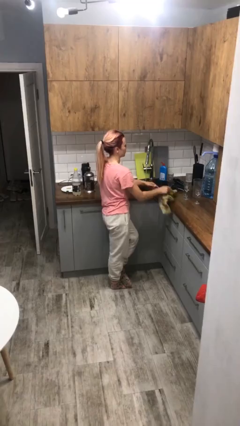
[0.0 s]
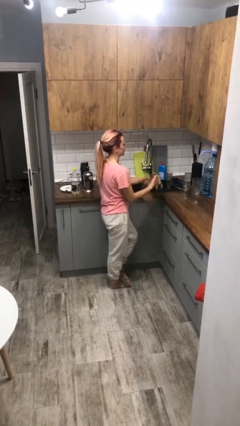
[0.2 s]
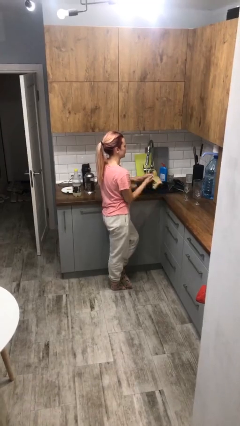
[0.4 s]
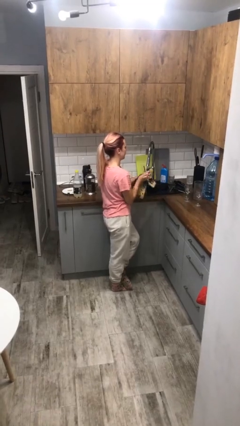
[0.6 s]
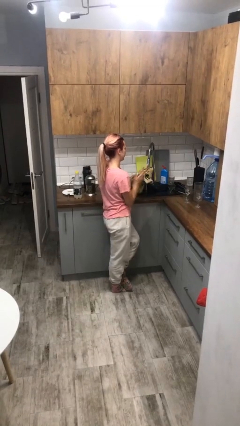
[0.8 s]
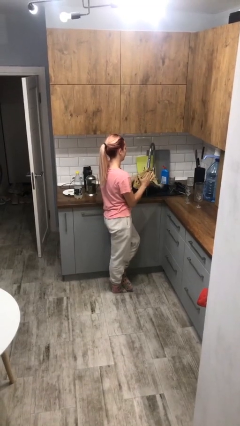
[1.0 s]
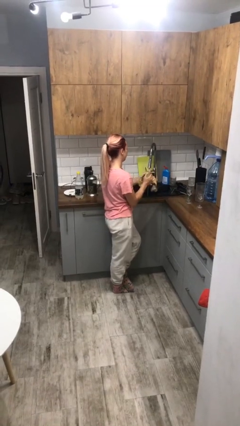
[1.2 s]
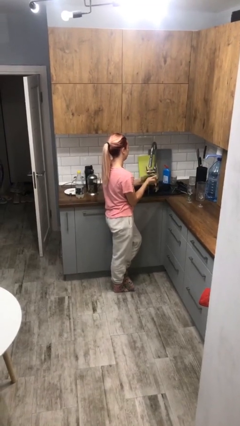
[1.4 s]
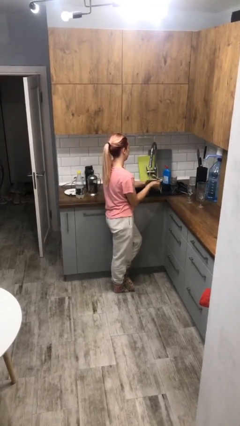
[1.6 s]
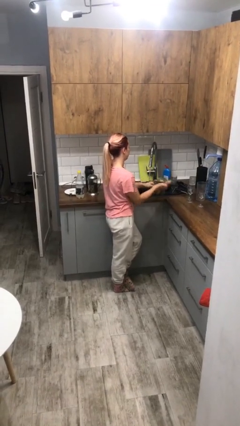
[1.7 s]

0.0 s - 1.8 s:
person dries hands with towel

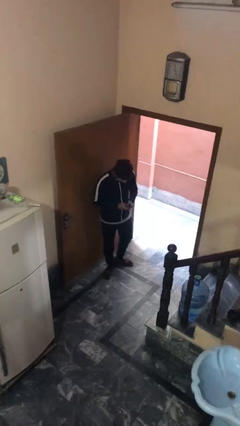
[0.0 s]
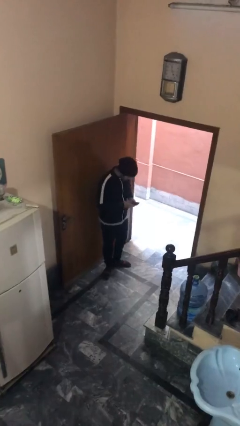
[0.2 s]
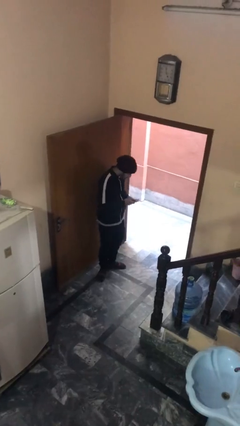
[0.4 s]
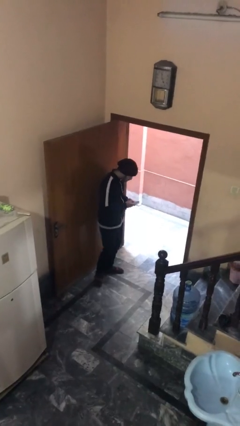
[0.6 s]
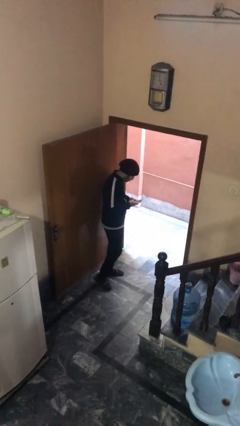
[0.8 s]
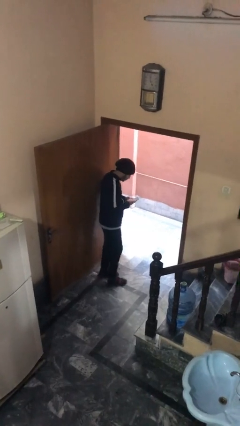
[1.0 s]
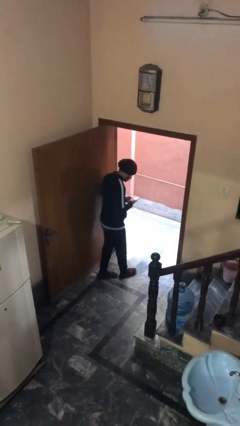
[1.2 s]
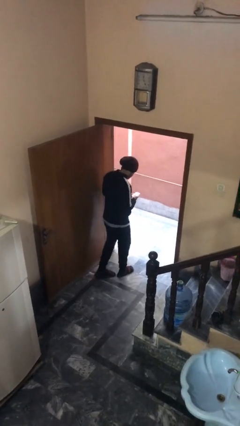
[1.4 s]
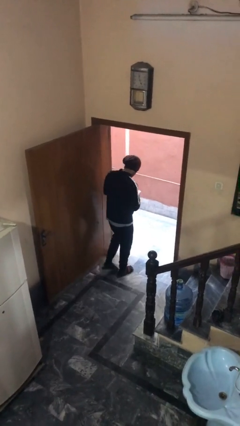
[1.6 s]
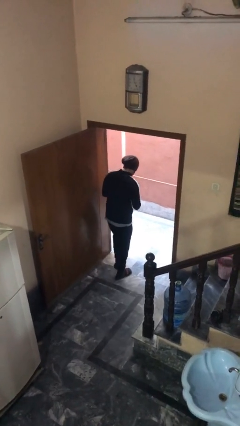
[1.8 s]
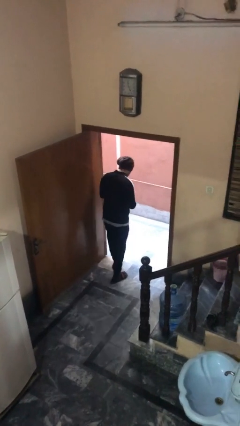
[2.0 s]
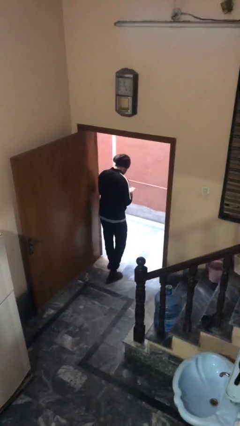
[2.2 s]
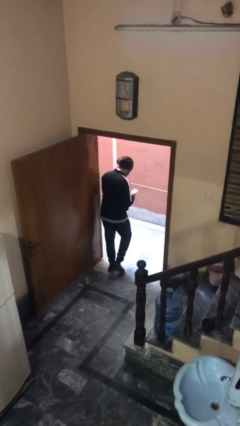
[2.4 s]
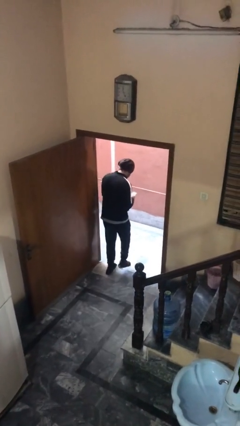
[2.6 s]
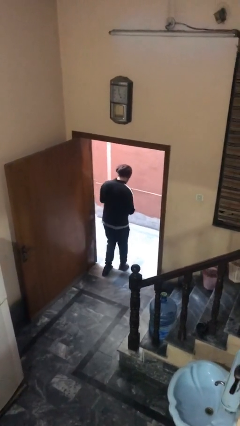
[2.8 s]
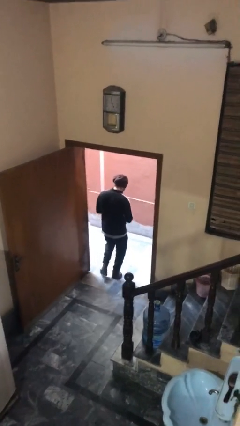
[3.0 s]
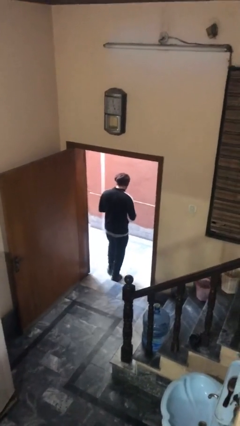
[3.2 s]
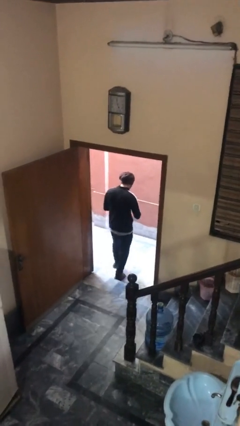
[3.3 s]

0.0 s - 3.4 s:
person exits scene through structure

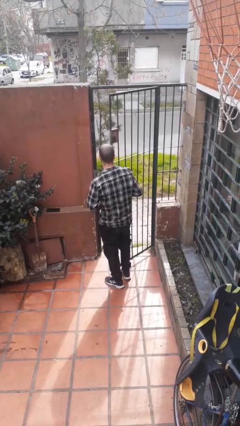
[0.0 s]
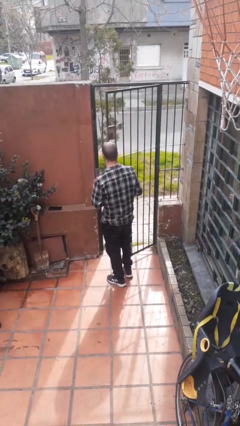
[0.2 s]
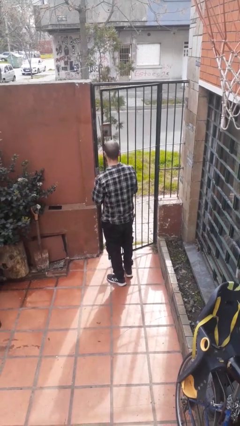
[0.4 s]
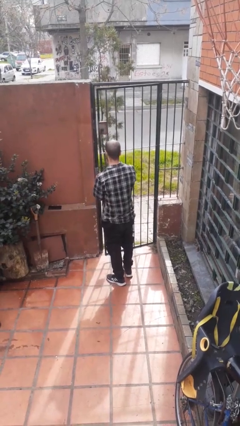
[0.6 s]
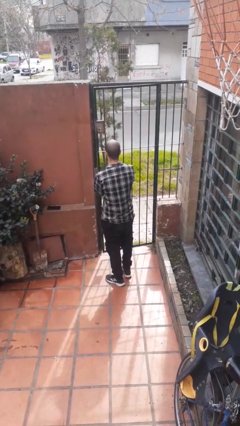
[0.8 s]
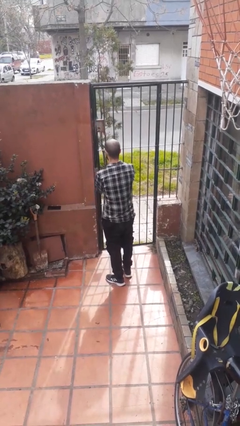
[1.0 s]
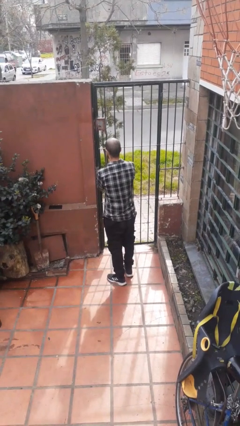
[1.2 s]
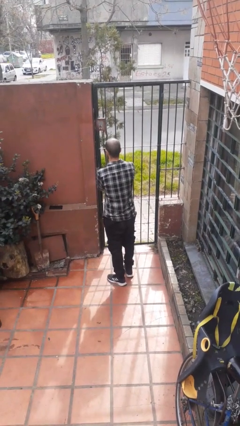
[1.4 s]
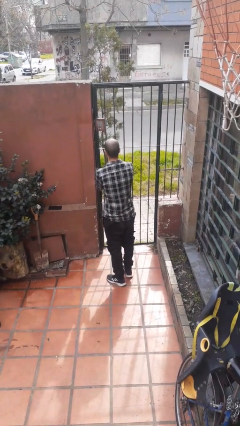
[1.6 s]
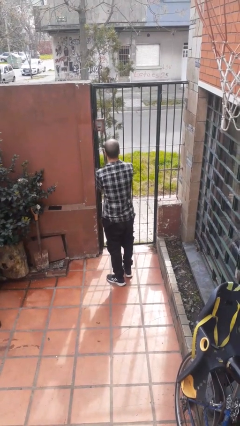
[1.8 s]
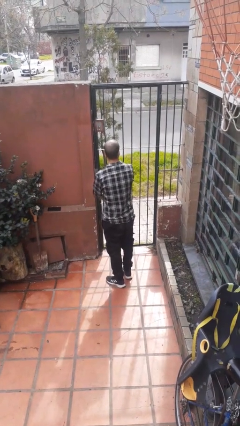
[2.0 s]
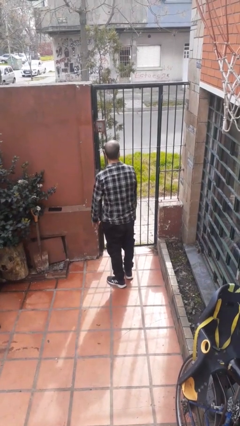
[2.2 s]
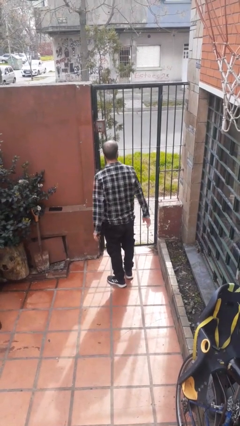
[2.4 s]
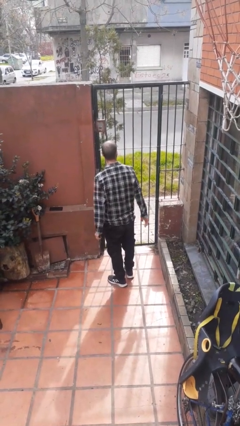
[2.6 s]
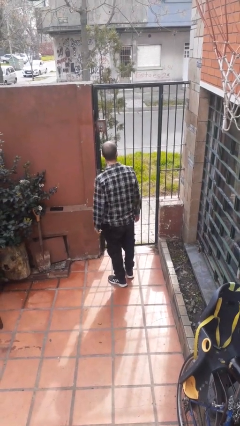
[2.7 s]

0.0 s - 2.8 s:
person closes gate

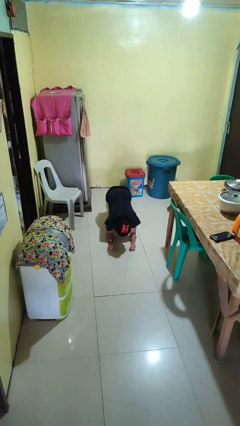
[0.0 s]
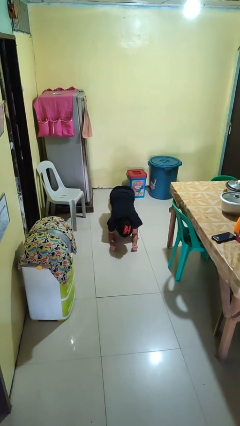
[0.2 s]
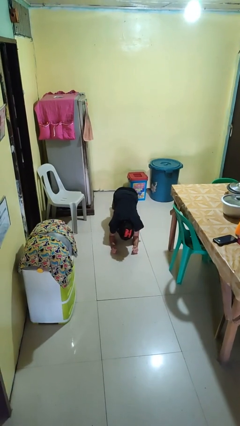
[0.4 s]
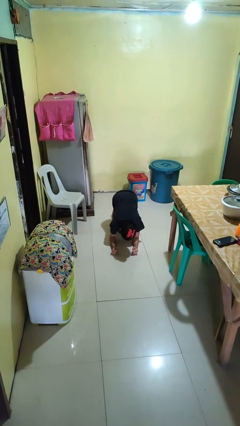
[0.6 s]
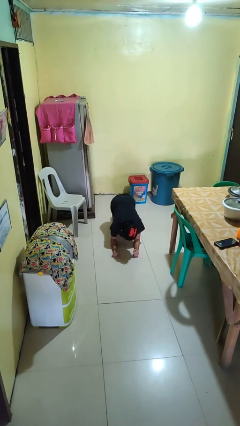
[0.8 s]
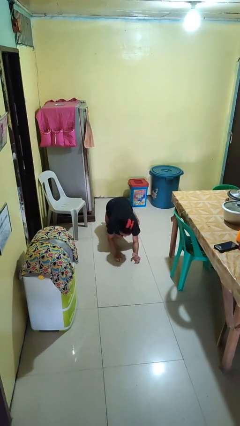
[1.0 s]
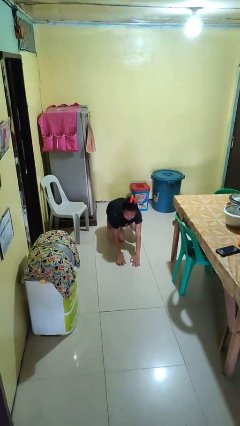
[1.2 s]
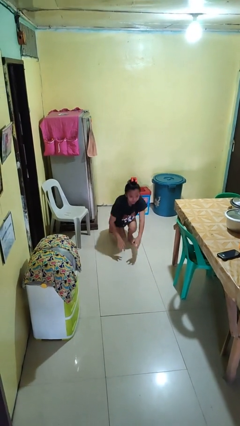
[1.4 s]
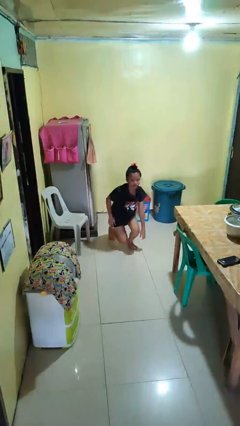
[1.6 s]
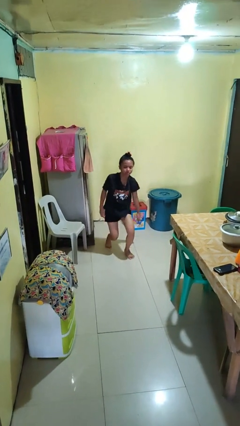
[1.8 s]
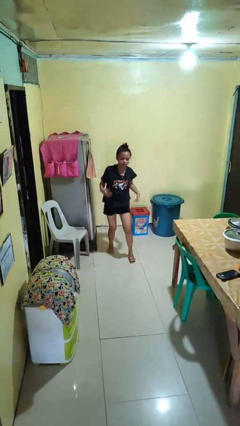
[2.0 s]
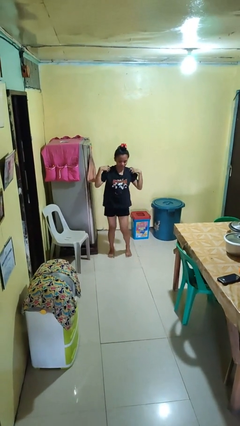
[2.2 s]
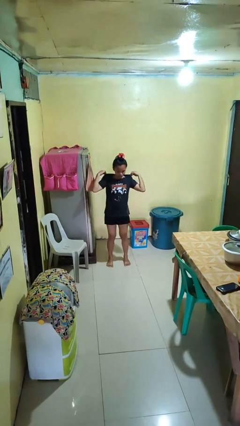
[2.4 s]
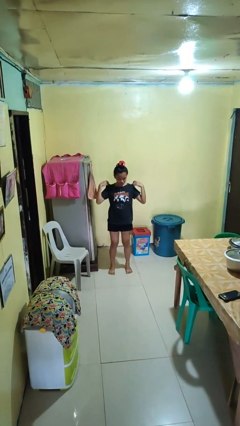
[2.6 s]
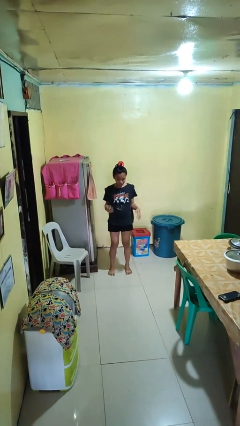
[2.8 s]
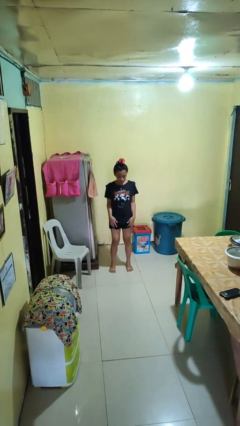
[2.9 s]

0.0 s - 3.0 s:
person stands up from floor

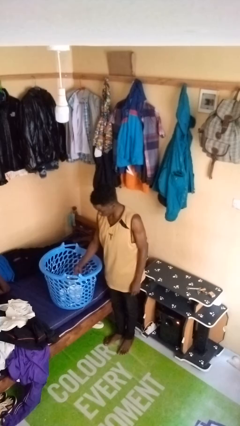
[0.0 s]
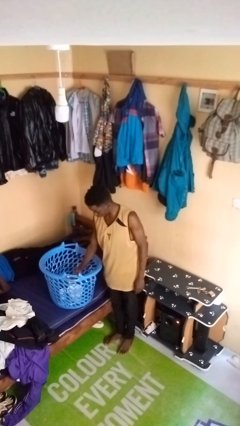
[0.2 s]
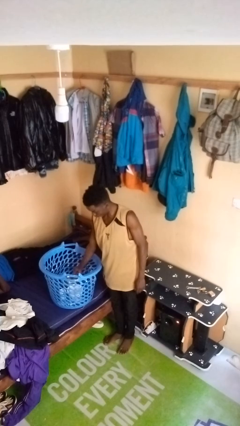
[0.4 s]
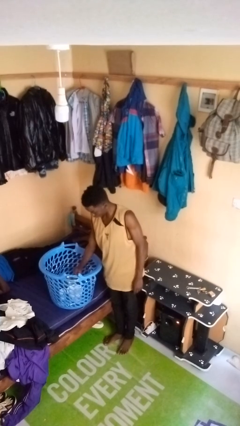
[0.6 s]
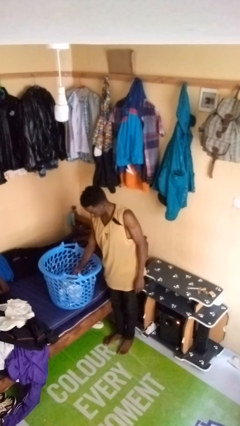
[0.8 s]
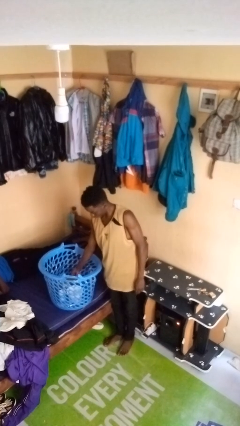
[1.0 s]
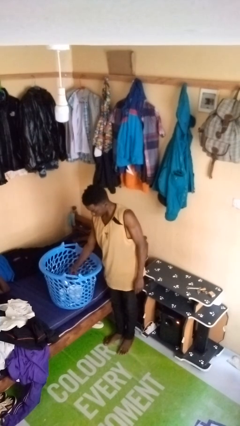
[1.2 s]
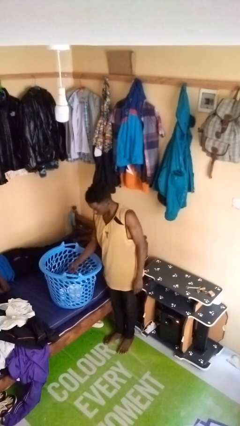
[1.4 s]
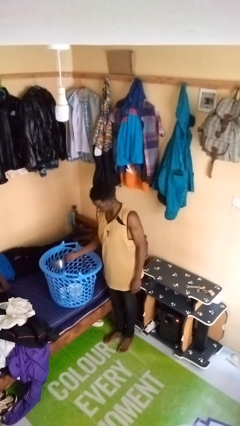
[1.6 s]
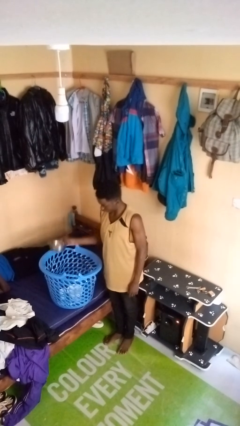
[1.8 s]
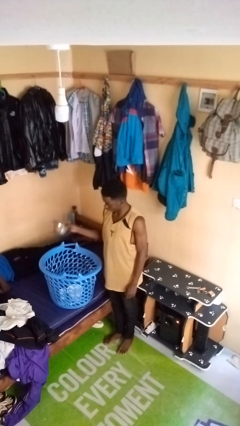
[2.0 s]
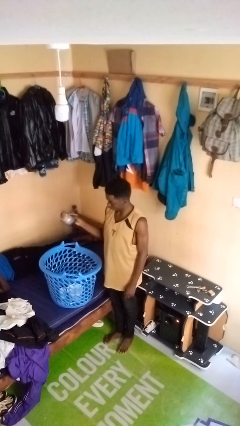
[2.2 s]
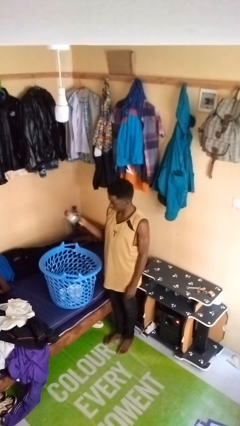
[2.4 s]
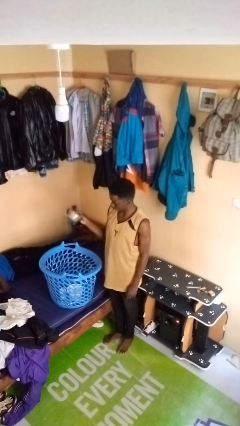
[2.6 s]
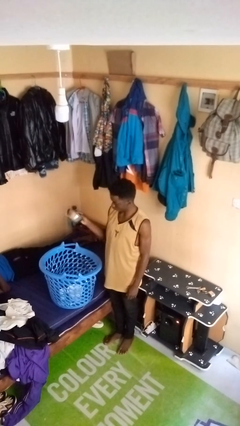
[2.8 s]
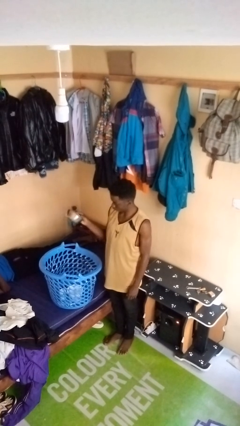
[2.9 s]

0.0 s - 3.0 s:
person takes object from basket

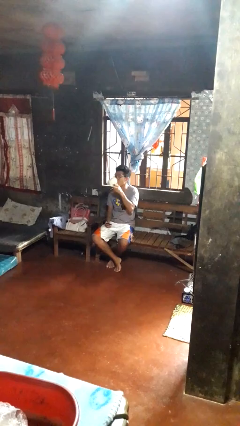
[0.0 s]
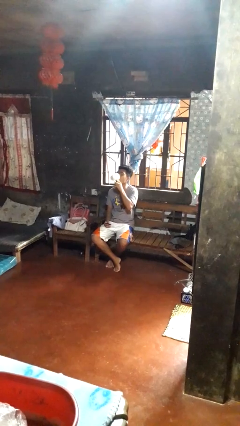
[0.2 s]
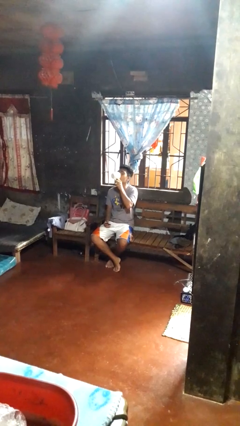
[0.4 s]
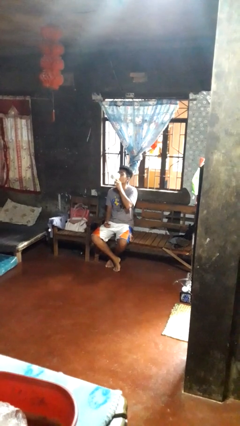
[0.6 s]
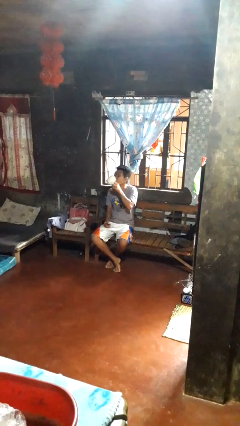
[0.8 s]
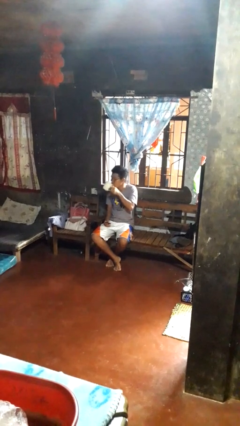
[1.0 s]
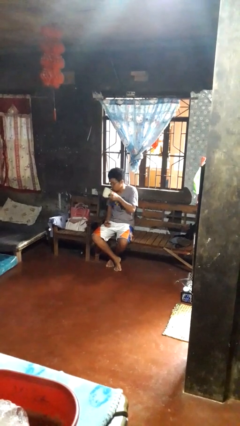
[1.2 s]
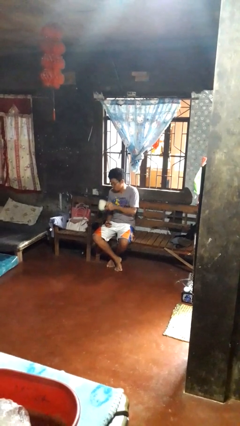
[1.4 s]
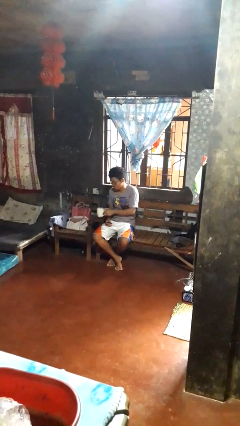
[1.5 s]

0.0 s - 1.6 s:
person drinks from cup

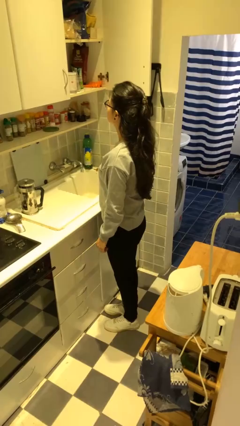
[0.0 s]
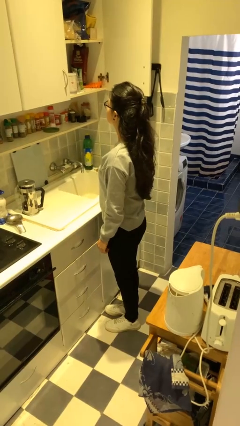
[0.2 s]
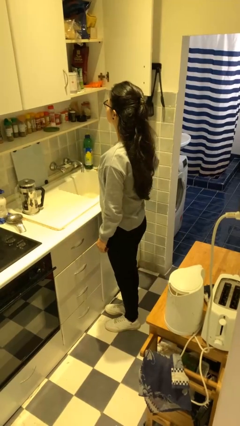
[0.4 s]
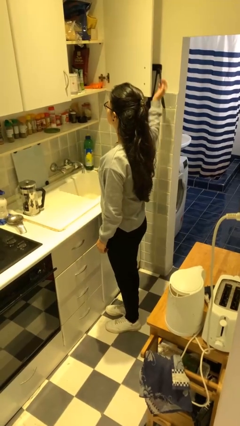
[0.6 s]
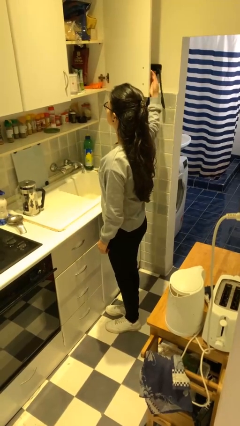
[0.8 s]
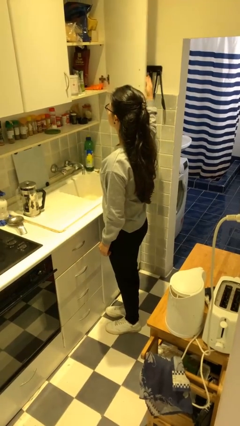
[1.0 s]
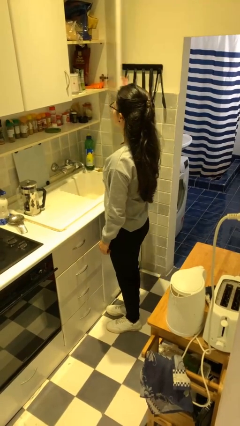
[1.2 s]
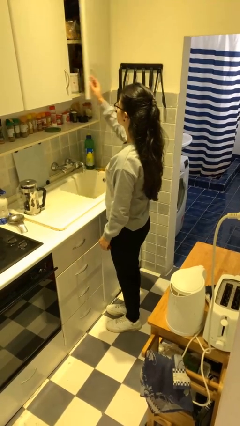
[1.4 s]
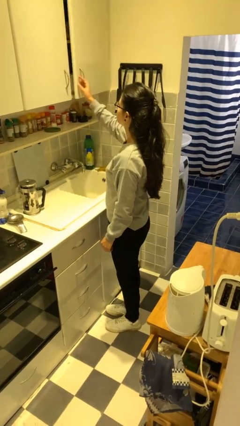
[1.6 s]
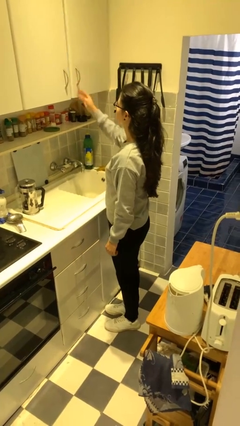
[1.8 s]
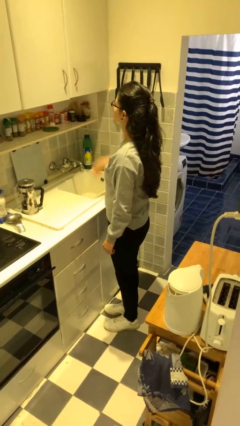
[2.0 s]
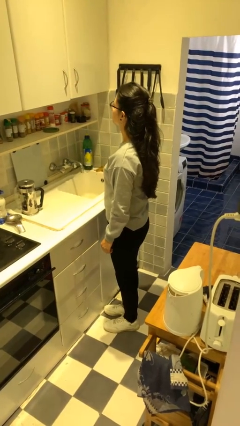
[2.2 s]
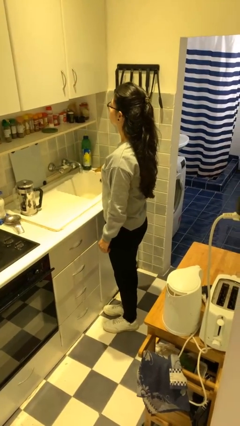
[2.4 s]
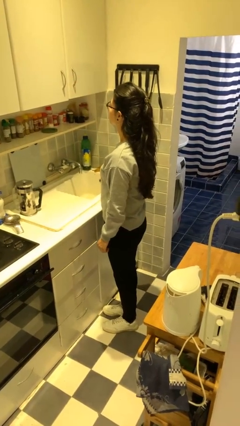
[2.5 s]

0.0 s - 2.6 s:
person closes cabinet
